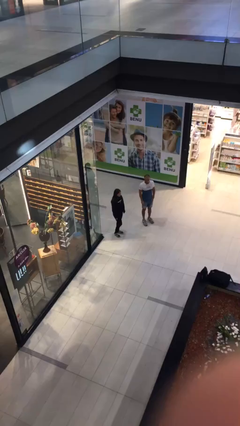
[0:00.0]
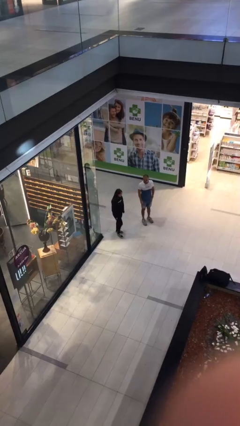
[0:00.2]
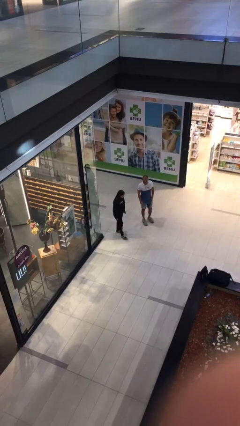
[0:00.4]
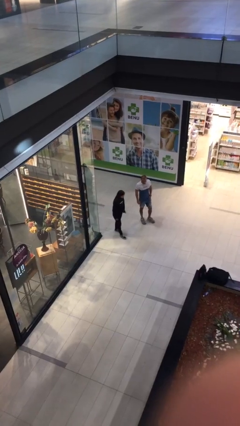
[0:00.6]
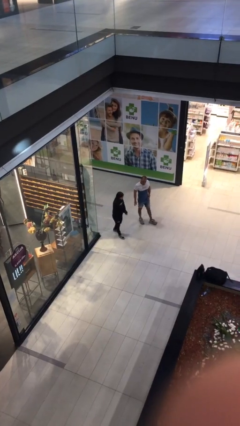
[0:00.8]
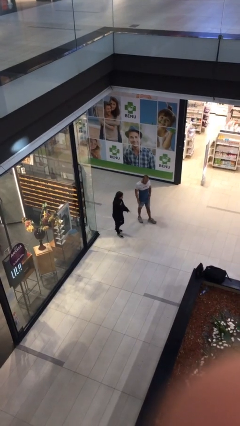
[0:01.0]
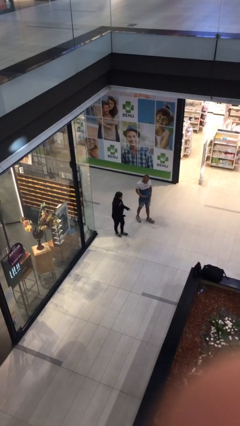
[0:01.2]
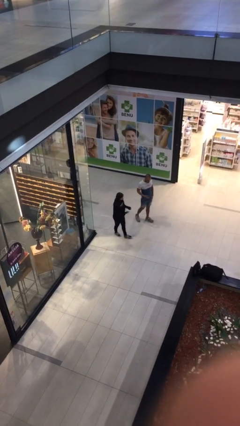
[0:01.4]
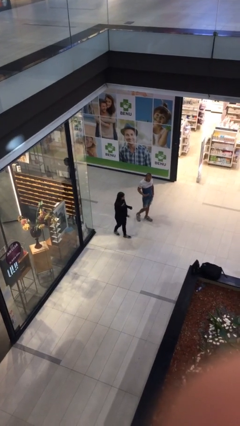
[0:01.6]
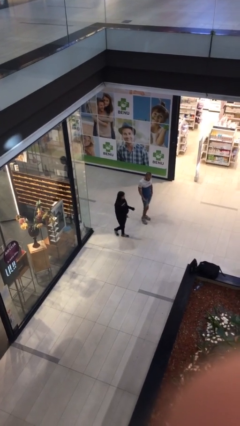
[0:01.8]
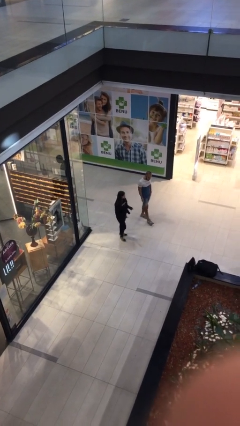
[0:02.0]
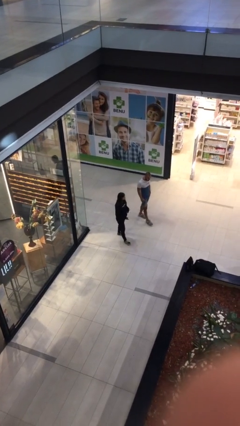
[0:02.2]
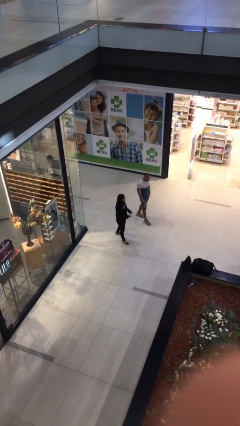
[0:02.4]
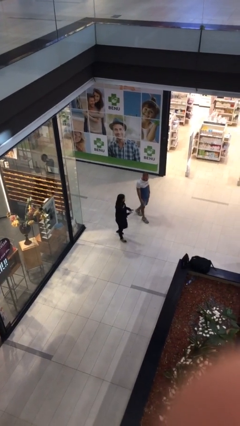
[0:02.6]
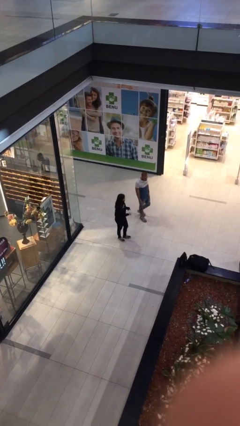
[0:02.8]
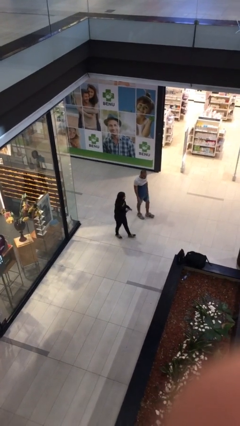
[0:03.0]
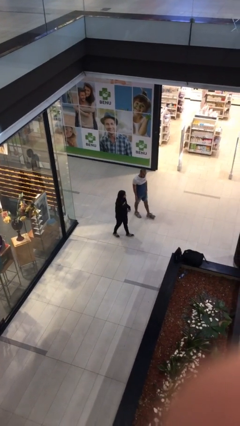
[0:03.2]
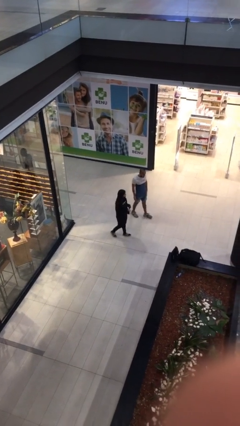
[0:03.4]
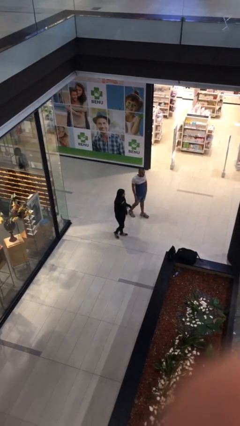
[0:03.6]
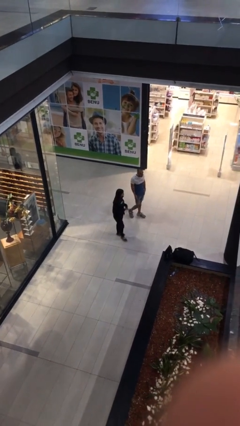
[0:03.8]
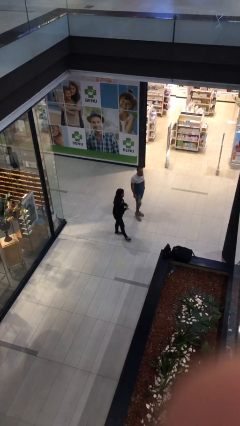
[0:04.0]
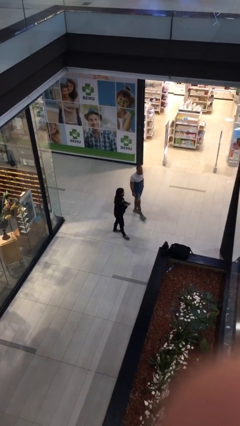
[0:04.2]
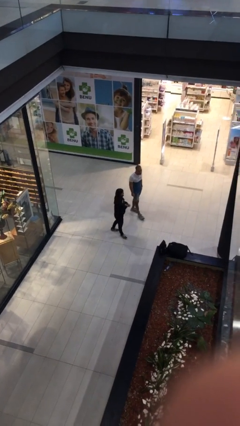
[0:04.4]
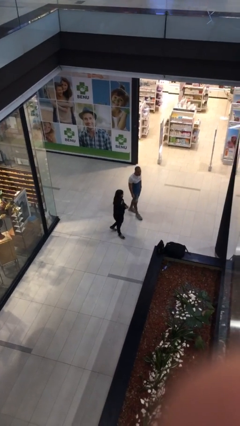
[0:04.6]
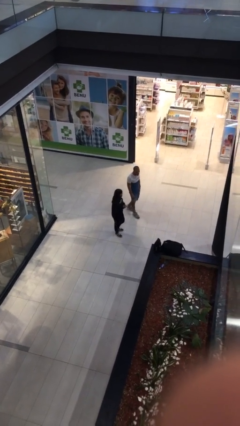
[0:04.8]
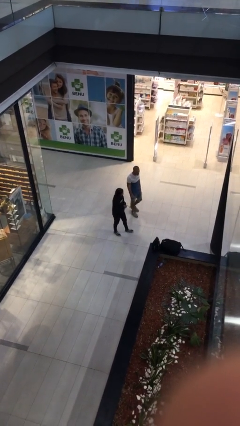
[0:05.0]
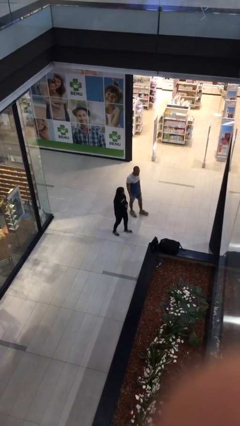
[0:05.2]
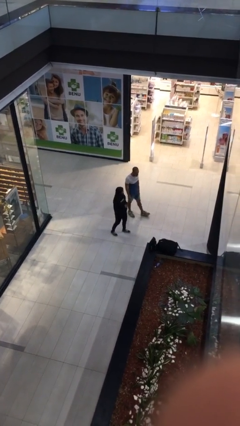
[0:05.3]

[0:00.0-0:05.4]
person talks to person

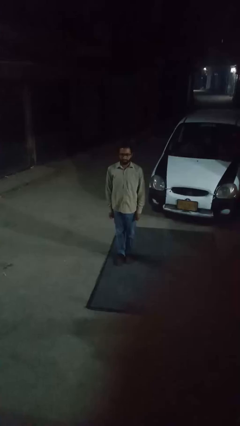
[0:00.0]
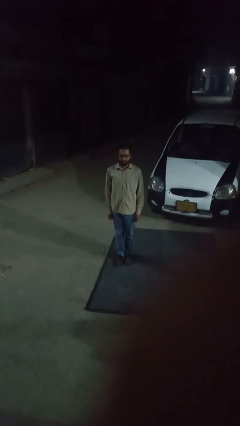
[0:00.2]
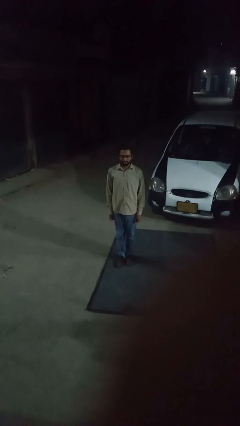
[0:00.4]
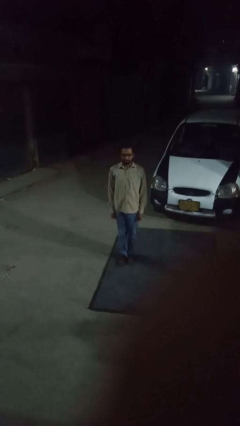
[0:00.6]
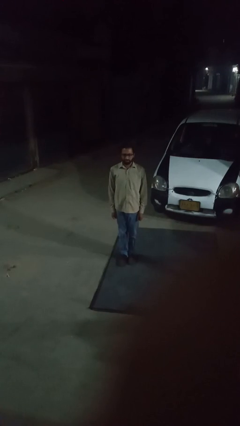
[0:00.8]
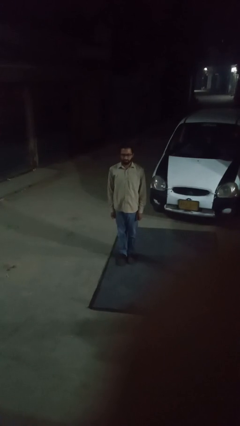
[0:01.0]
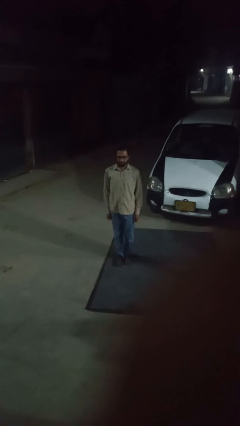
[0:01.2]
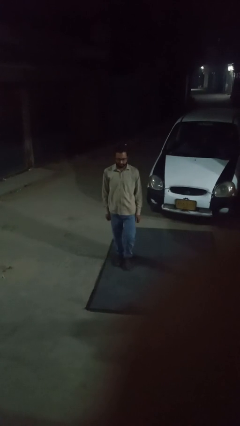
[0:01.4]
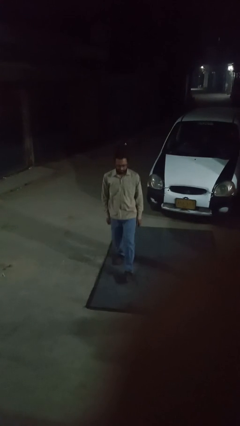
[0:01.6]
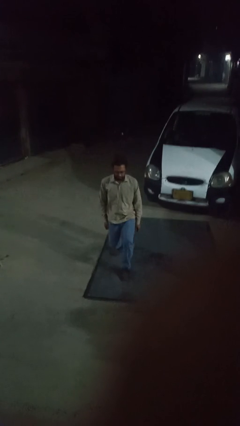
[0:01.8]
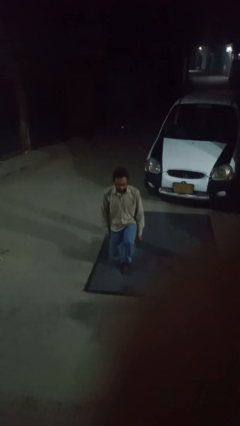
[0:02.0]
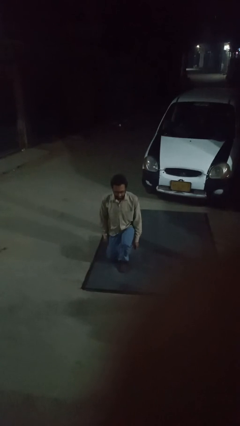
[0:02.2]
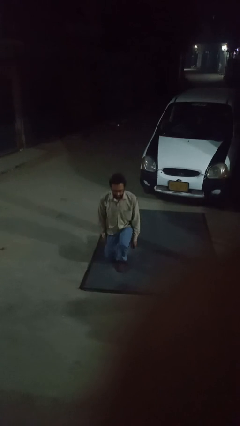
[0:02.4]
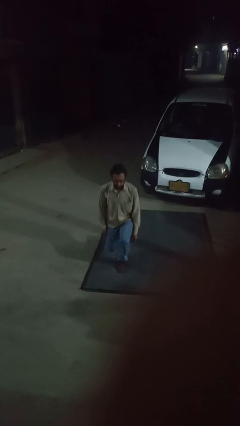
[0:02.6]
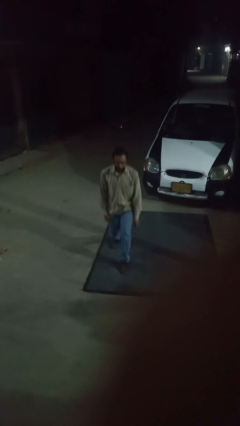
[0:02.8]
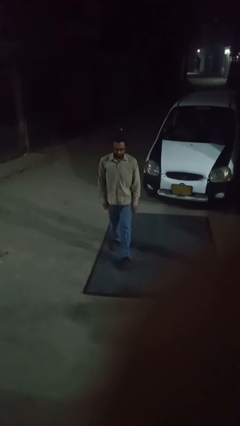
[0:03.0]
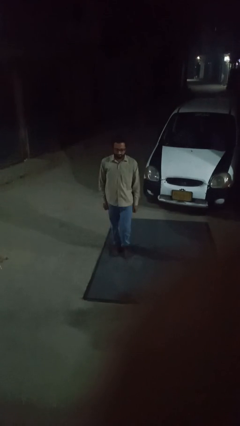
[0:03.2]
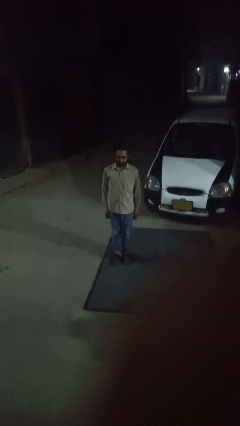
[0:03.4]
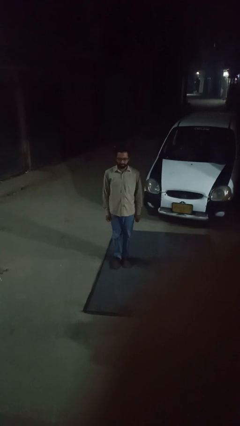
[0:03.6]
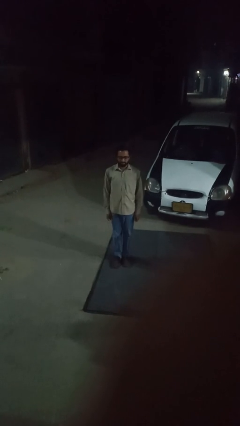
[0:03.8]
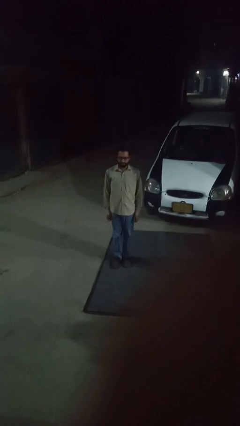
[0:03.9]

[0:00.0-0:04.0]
person exercises with lunges

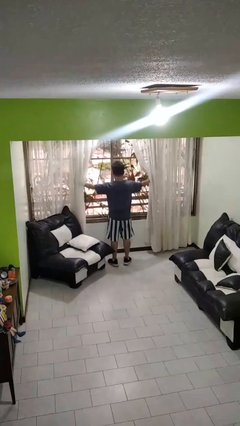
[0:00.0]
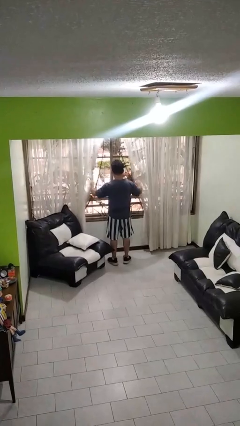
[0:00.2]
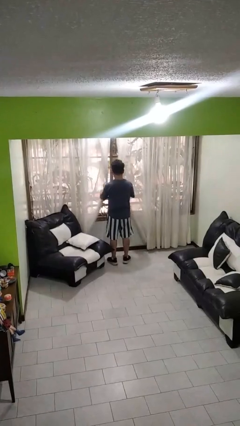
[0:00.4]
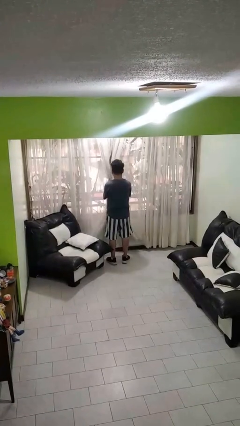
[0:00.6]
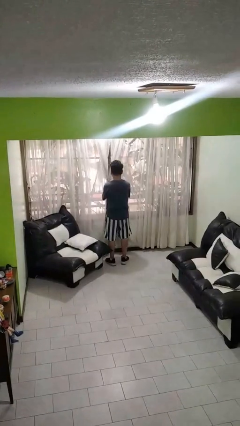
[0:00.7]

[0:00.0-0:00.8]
person closes curtains

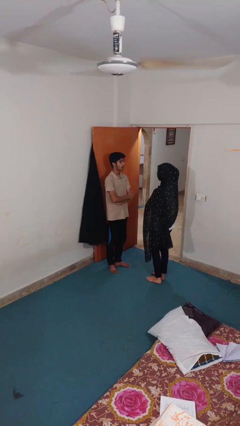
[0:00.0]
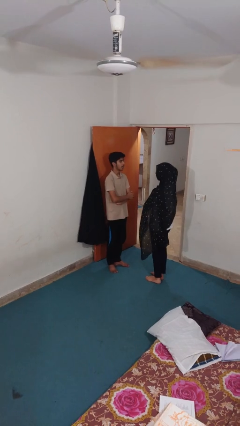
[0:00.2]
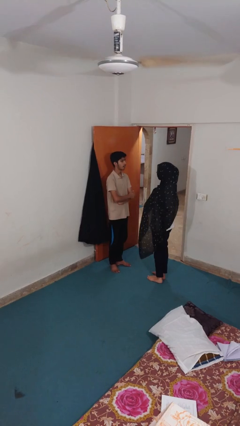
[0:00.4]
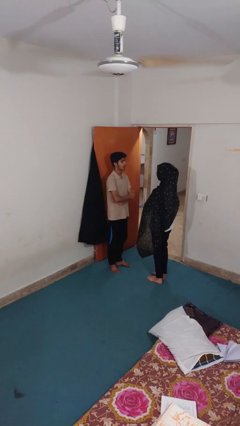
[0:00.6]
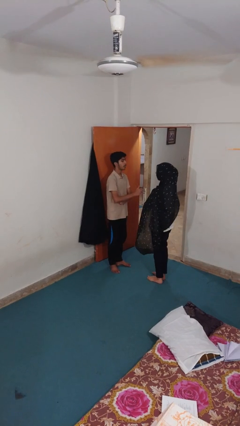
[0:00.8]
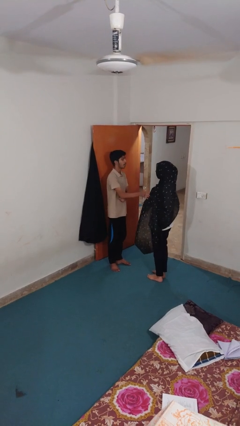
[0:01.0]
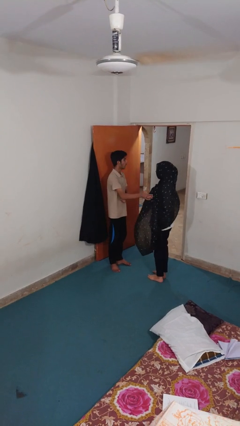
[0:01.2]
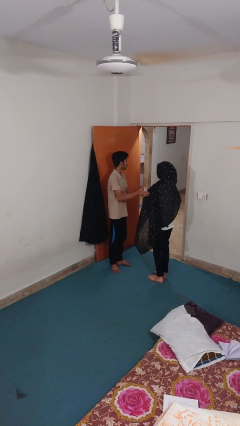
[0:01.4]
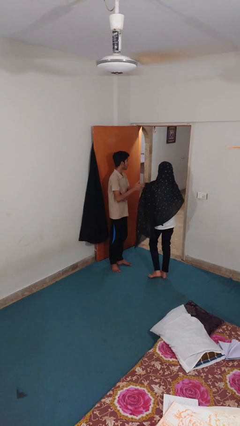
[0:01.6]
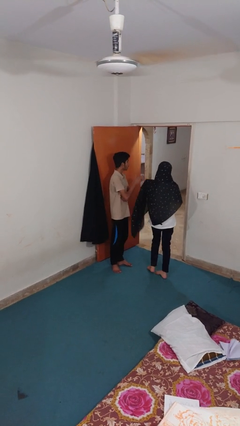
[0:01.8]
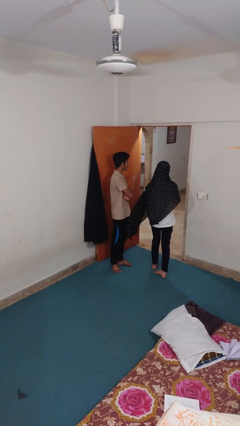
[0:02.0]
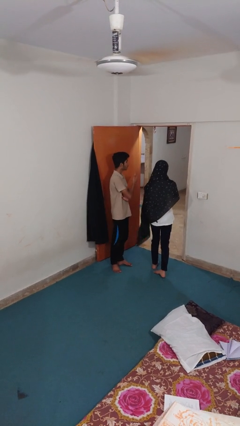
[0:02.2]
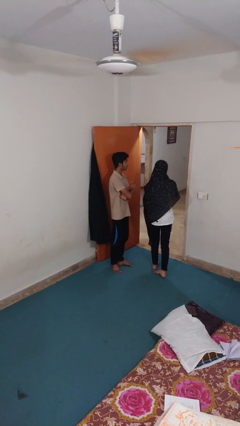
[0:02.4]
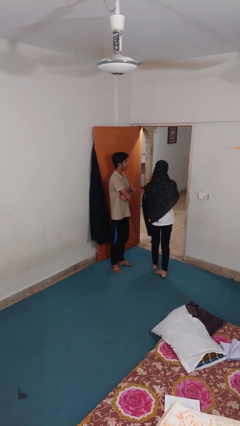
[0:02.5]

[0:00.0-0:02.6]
person shoves person

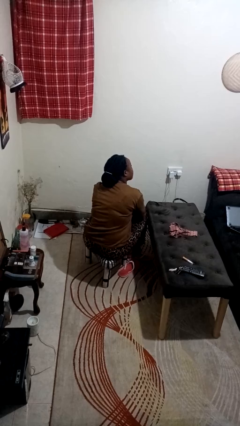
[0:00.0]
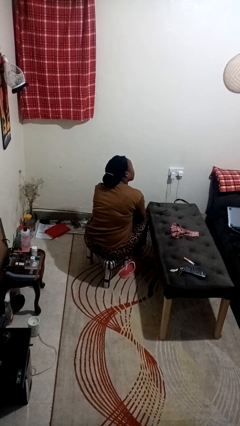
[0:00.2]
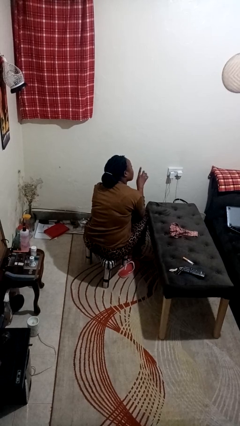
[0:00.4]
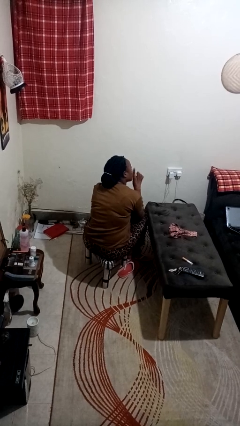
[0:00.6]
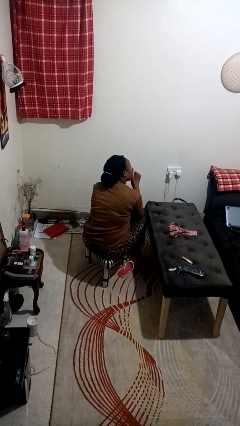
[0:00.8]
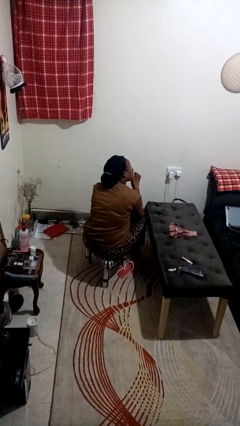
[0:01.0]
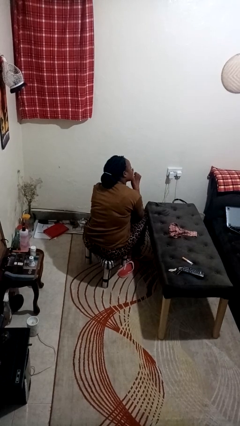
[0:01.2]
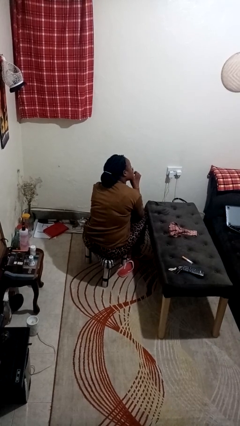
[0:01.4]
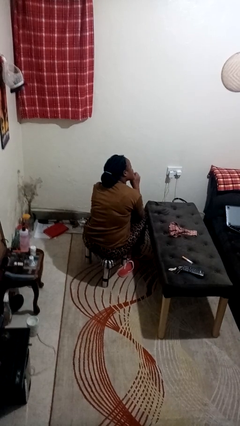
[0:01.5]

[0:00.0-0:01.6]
person gestures be quiet

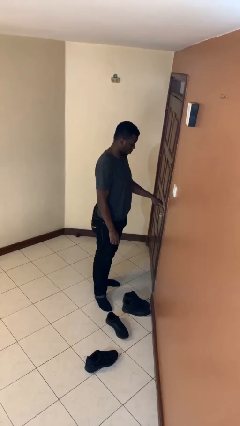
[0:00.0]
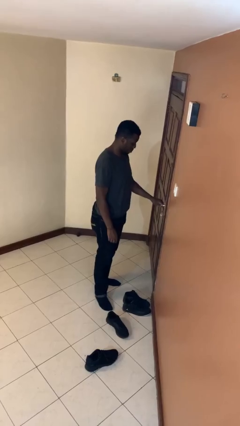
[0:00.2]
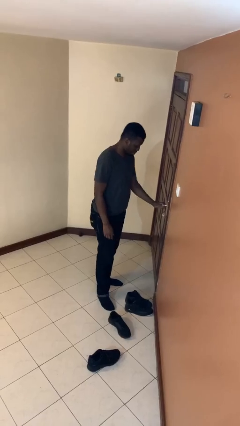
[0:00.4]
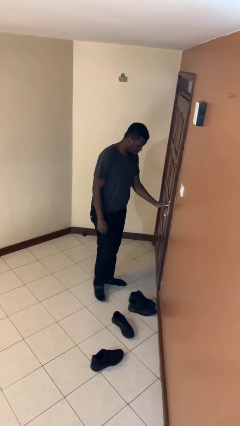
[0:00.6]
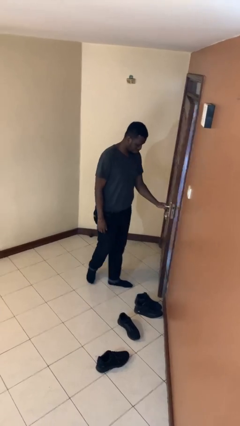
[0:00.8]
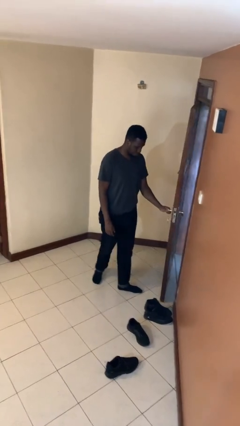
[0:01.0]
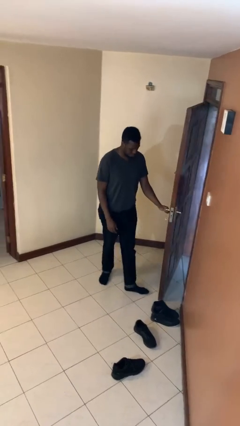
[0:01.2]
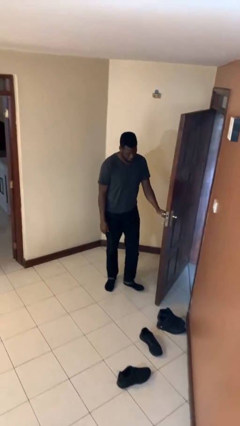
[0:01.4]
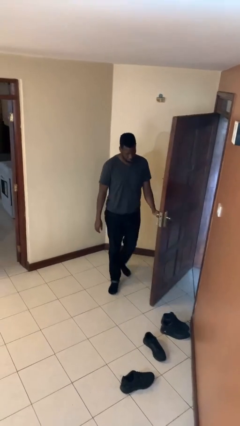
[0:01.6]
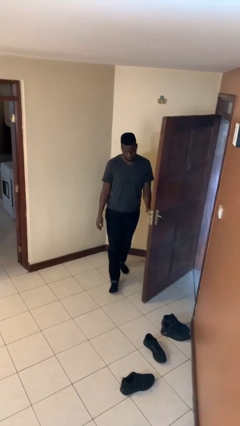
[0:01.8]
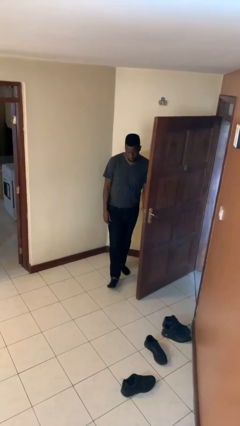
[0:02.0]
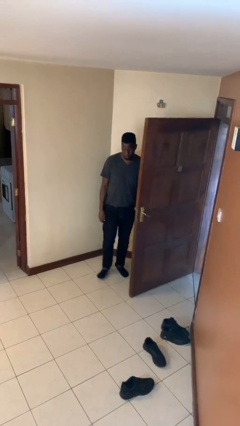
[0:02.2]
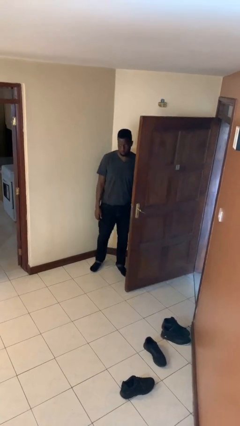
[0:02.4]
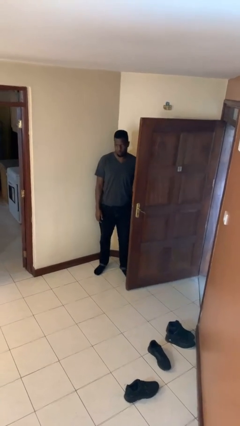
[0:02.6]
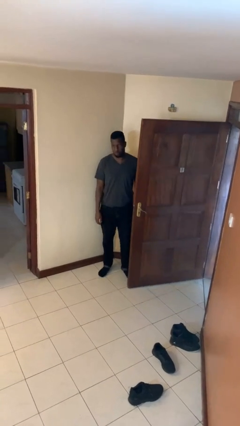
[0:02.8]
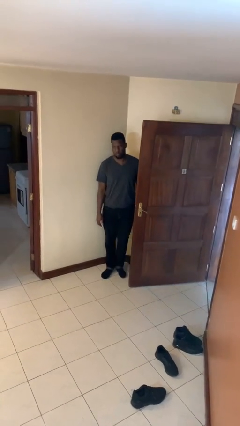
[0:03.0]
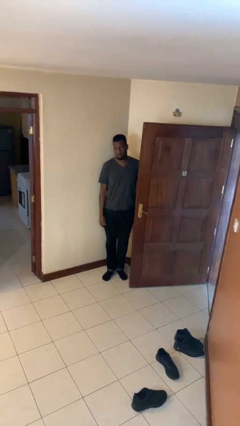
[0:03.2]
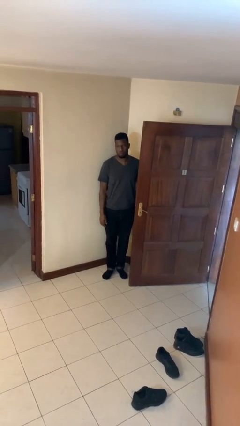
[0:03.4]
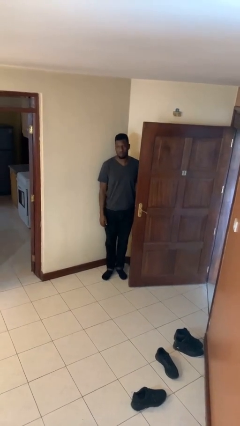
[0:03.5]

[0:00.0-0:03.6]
person opens facility door
